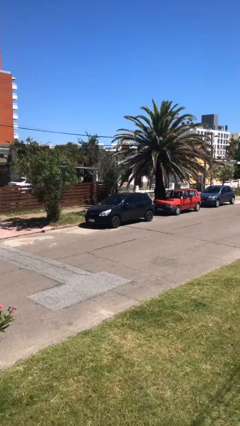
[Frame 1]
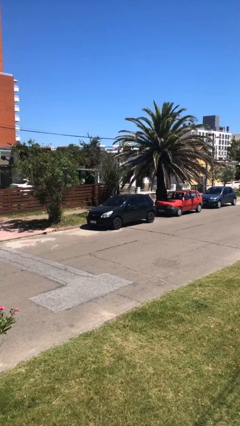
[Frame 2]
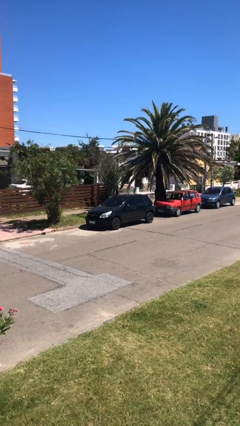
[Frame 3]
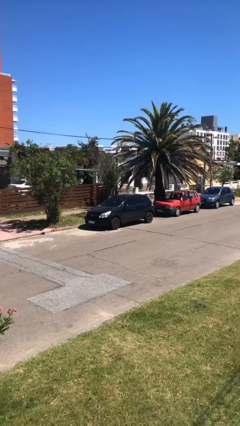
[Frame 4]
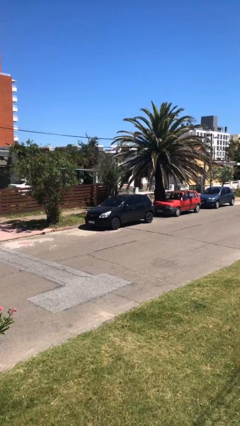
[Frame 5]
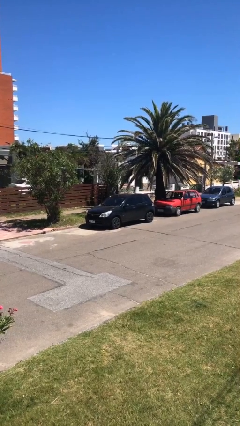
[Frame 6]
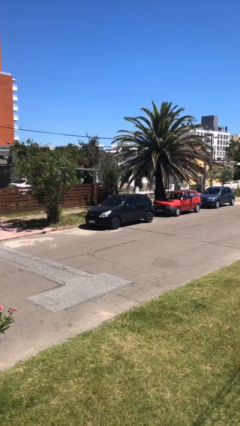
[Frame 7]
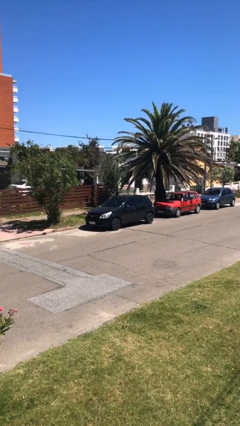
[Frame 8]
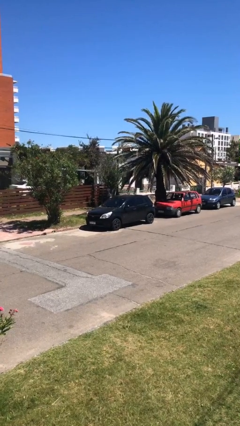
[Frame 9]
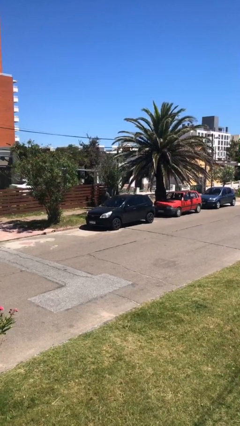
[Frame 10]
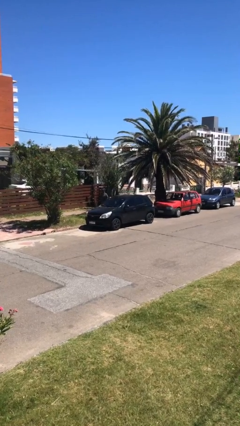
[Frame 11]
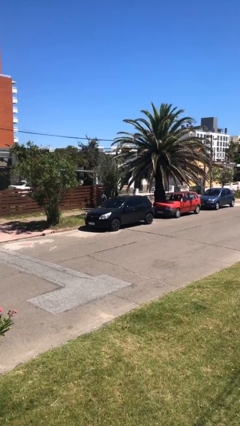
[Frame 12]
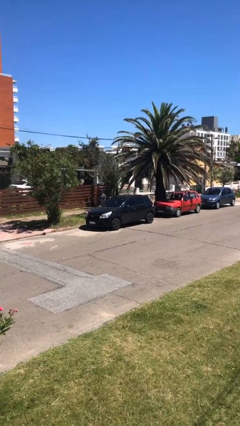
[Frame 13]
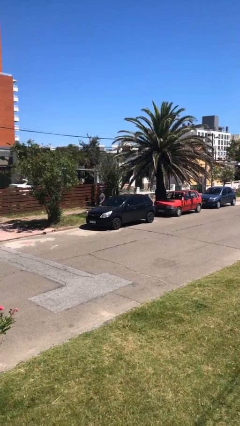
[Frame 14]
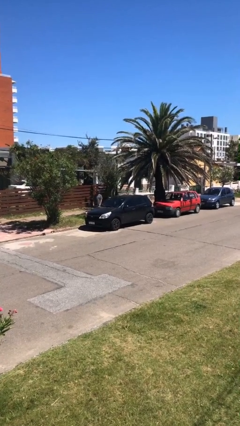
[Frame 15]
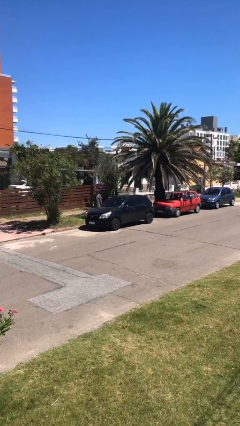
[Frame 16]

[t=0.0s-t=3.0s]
car drops off person

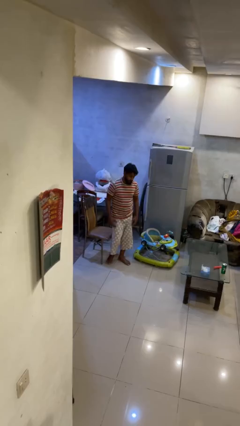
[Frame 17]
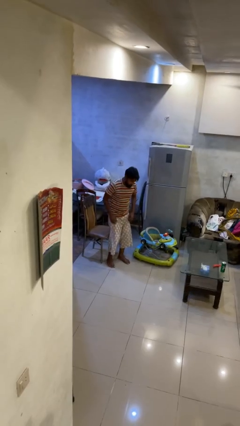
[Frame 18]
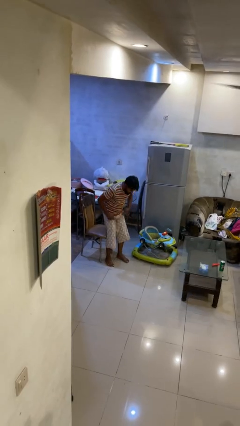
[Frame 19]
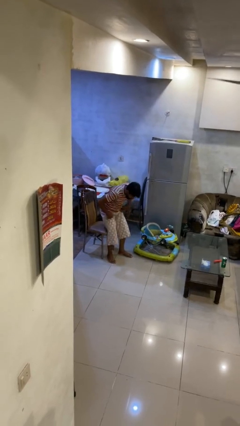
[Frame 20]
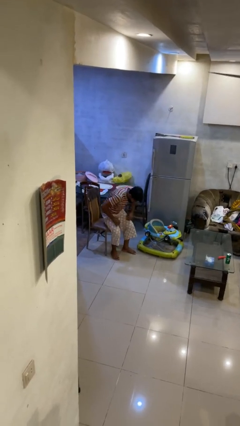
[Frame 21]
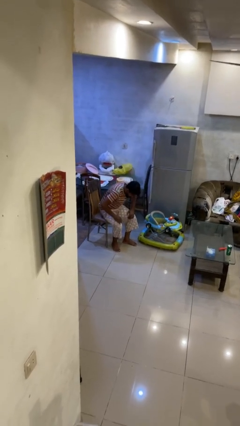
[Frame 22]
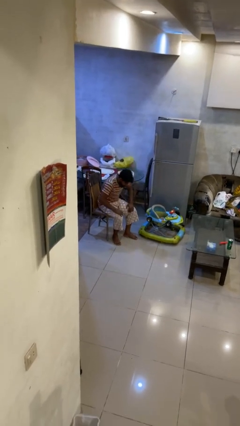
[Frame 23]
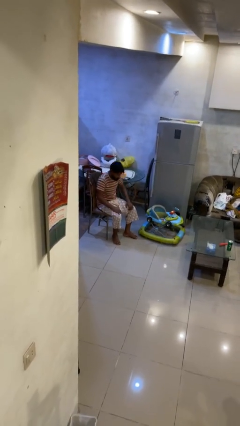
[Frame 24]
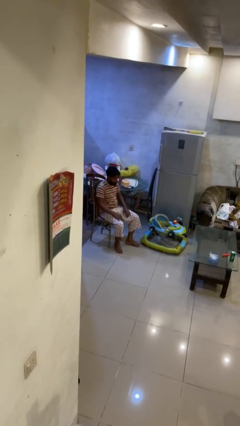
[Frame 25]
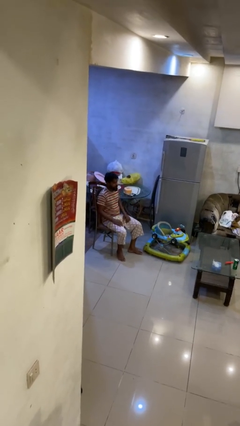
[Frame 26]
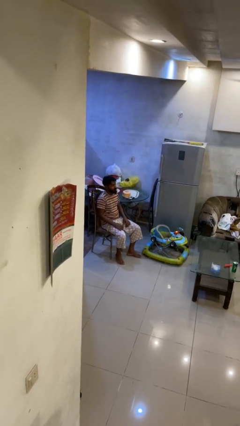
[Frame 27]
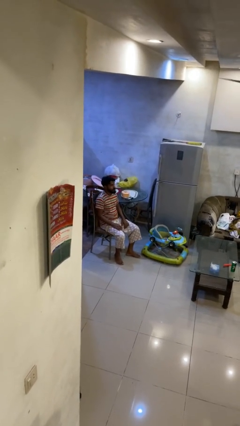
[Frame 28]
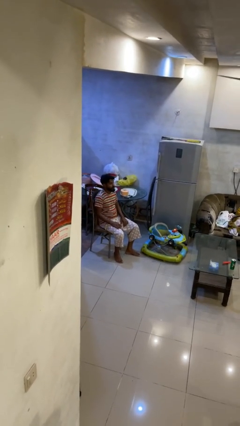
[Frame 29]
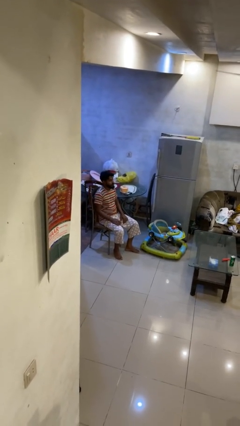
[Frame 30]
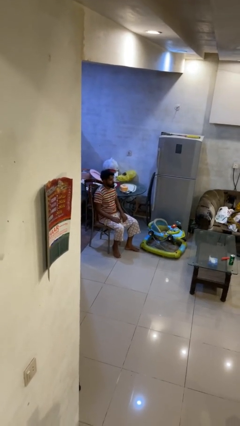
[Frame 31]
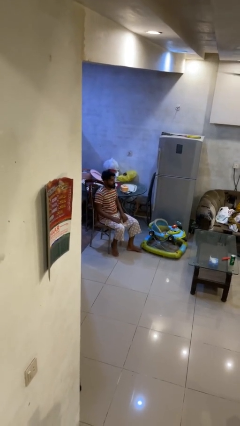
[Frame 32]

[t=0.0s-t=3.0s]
person sits down

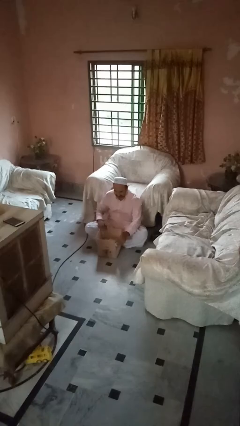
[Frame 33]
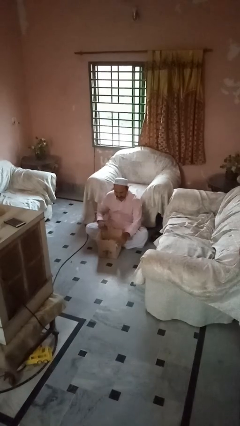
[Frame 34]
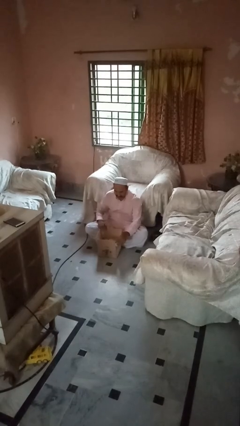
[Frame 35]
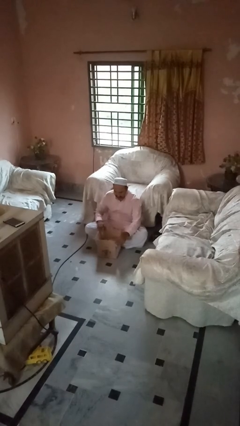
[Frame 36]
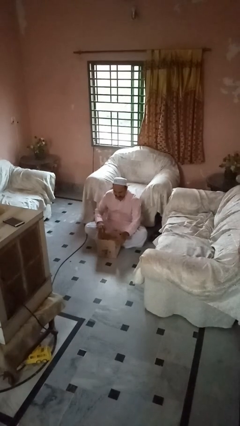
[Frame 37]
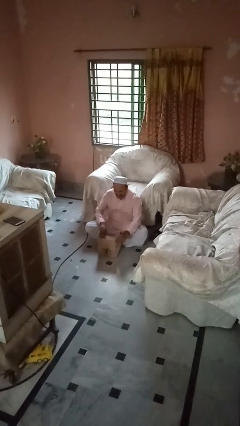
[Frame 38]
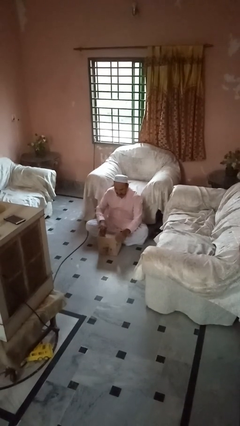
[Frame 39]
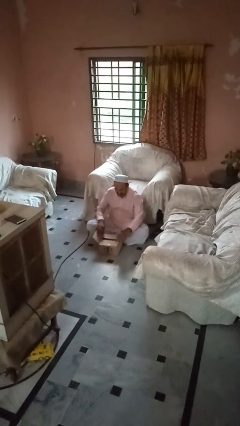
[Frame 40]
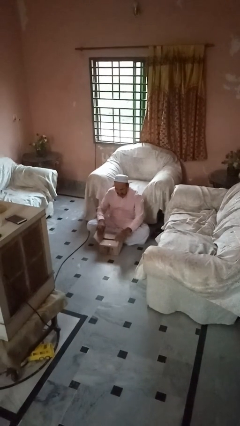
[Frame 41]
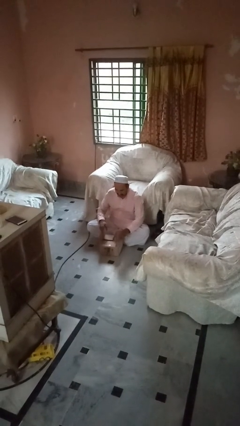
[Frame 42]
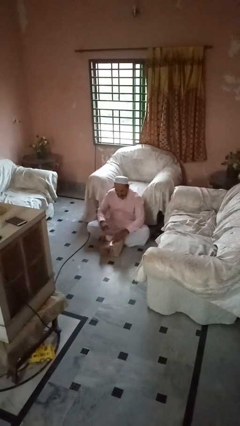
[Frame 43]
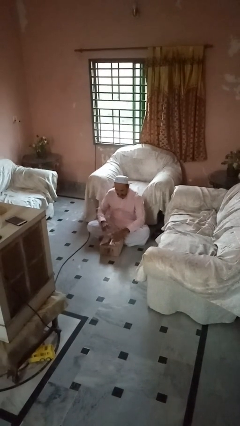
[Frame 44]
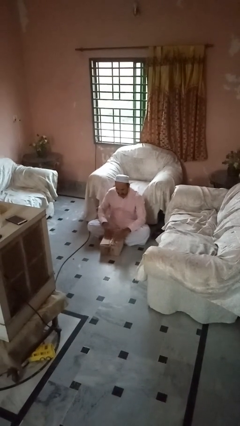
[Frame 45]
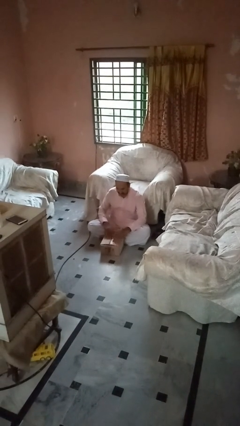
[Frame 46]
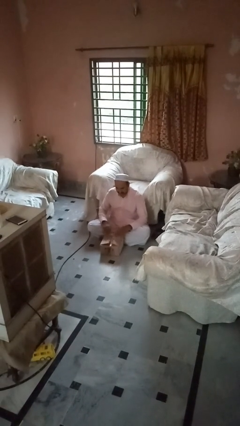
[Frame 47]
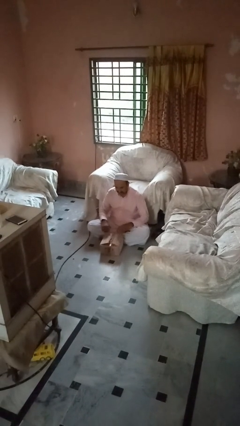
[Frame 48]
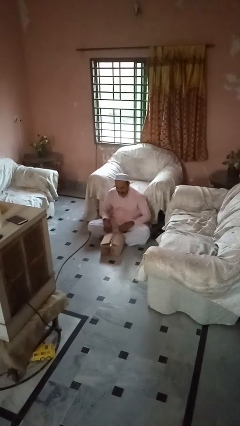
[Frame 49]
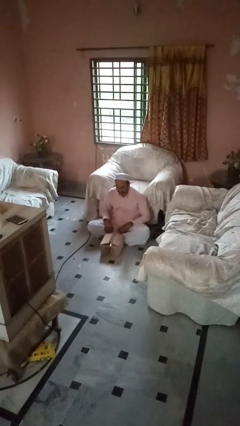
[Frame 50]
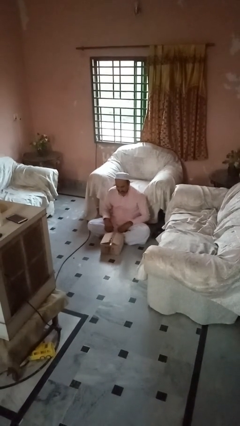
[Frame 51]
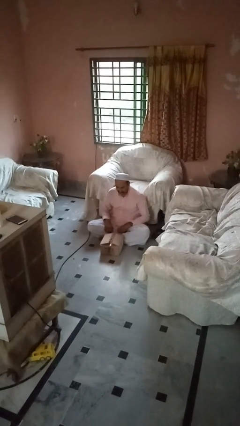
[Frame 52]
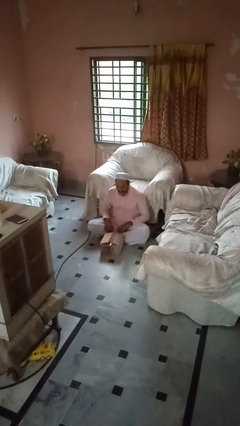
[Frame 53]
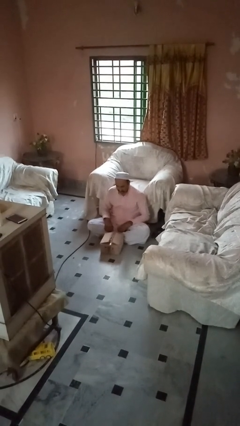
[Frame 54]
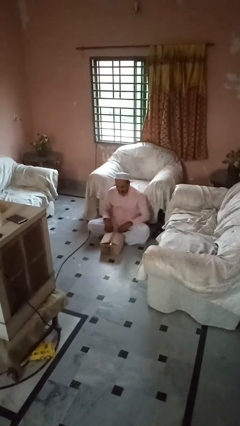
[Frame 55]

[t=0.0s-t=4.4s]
person closes box

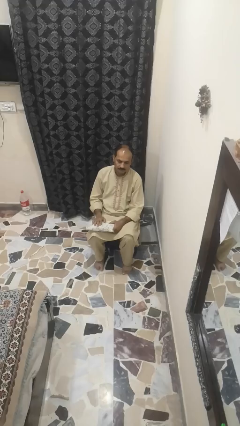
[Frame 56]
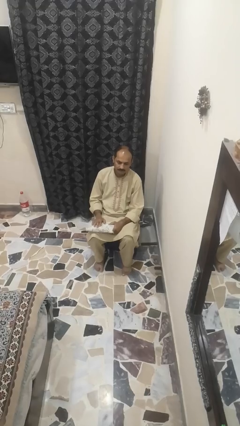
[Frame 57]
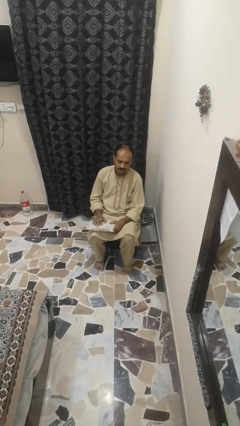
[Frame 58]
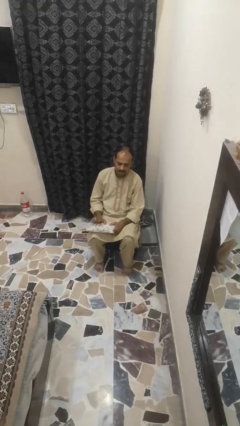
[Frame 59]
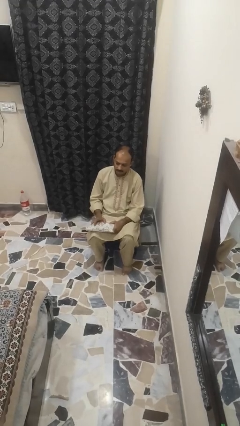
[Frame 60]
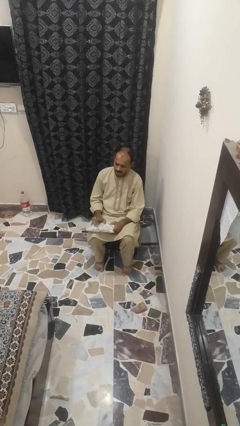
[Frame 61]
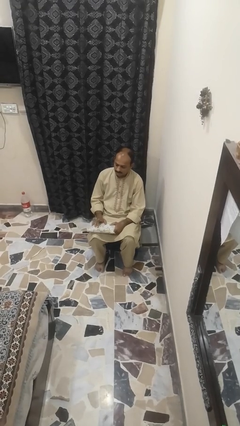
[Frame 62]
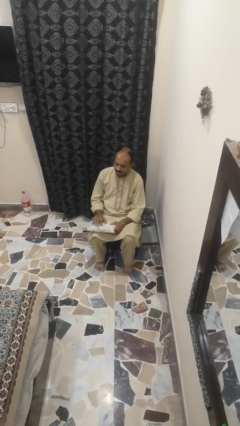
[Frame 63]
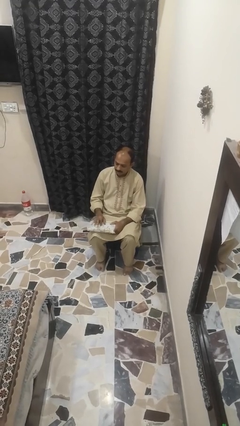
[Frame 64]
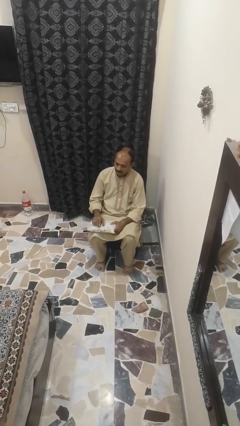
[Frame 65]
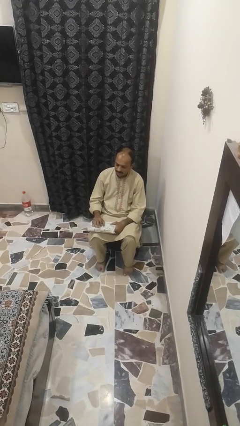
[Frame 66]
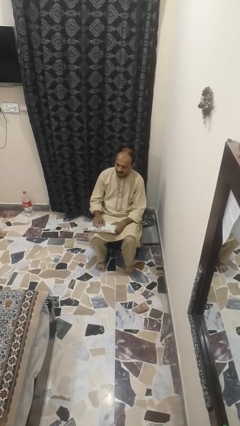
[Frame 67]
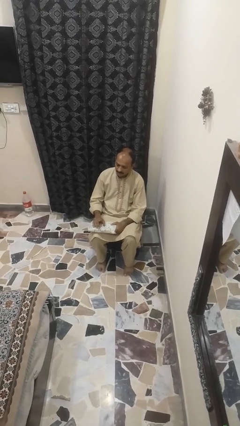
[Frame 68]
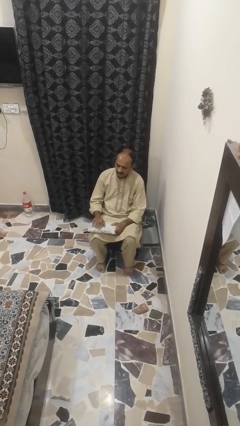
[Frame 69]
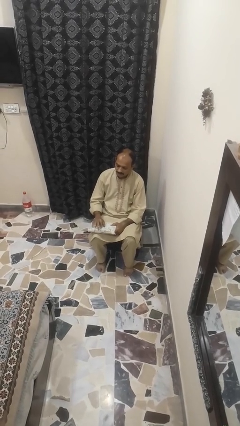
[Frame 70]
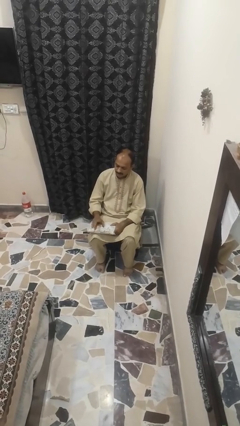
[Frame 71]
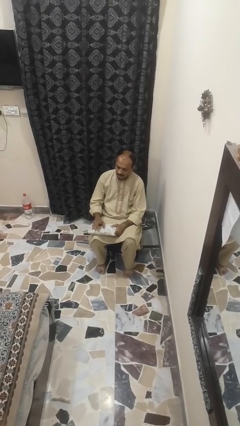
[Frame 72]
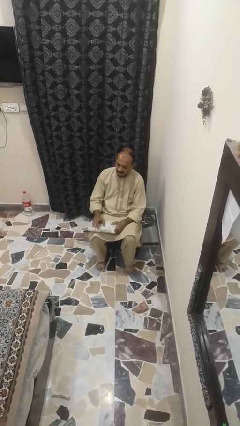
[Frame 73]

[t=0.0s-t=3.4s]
person taps object with finger

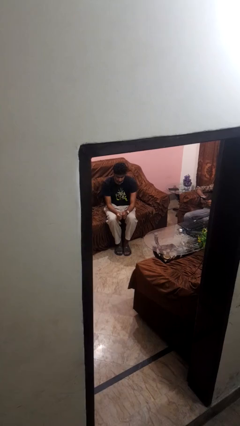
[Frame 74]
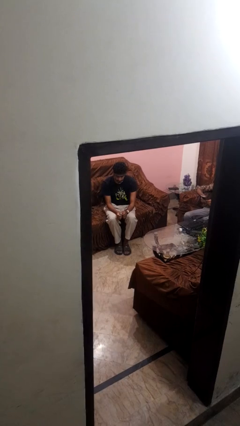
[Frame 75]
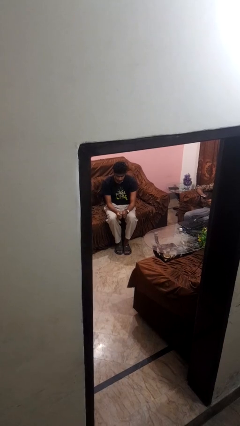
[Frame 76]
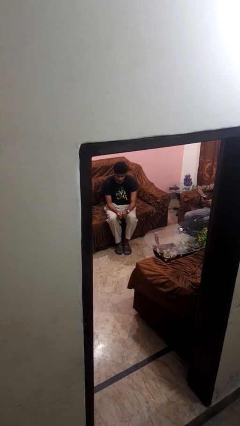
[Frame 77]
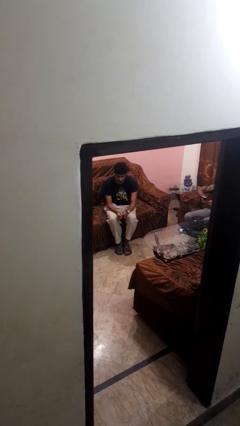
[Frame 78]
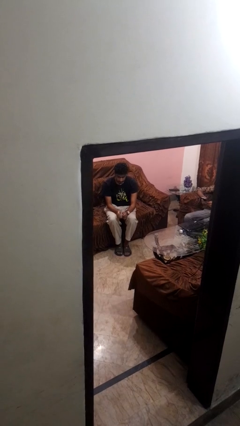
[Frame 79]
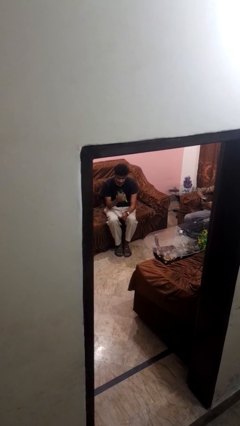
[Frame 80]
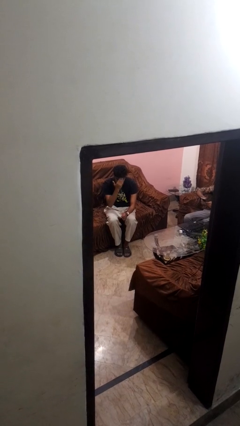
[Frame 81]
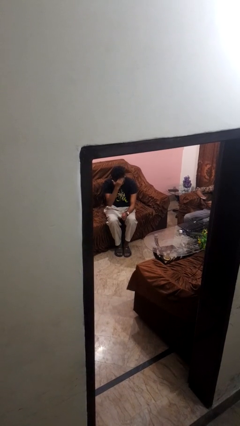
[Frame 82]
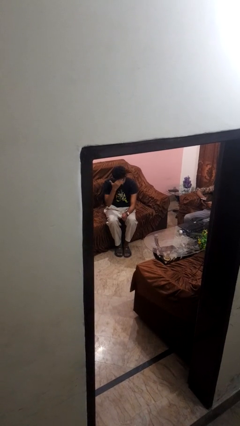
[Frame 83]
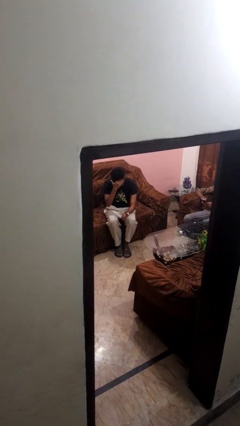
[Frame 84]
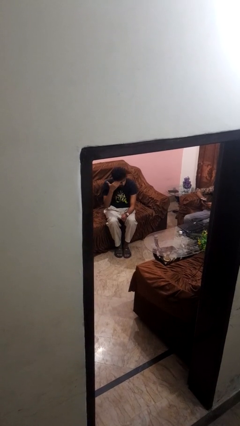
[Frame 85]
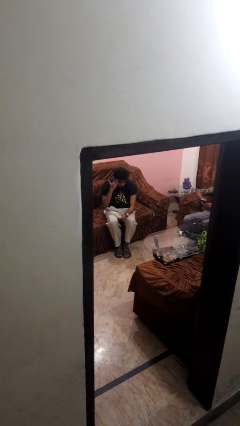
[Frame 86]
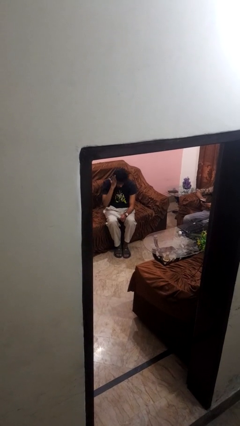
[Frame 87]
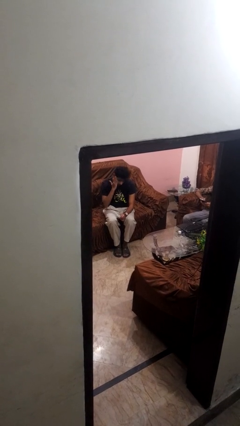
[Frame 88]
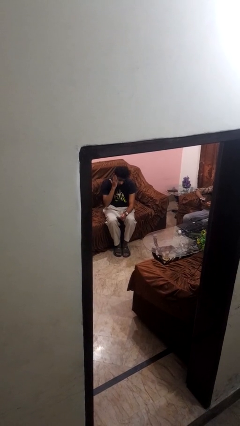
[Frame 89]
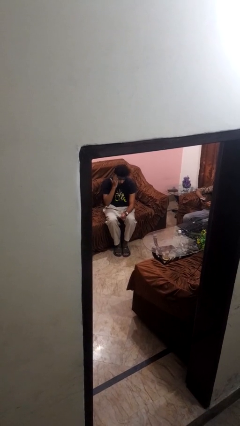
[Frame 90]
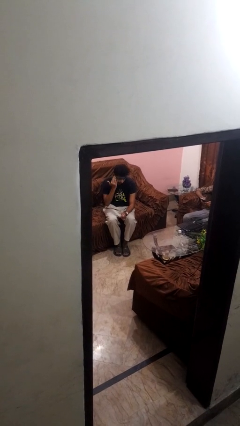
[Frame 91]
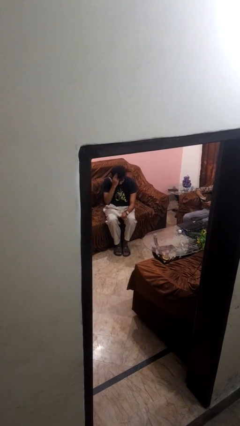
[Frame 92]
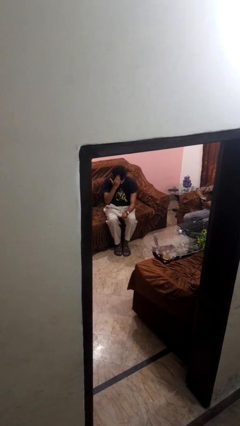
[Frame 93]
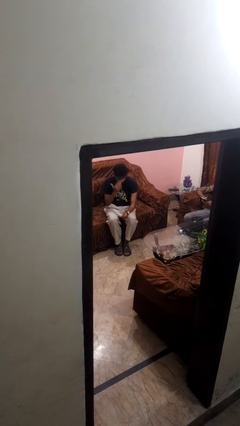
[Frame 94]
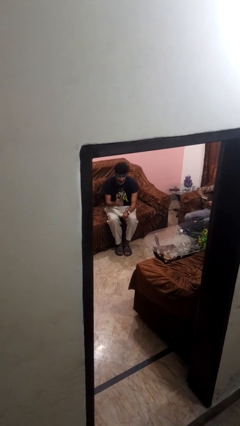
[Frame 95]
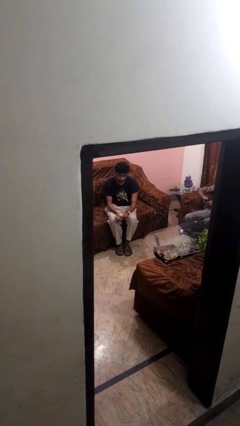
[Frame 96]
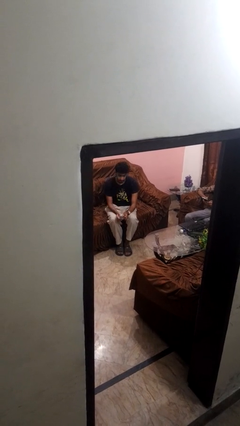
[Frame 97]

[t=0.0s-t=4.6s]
person scratches face
